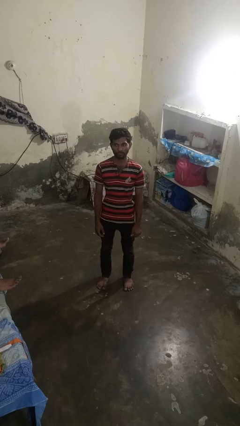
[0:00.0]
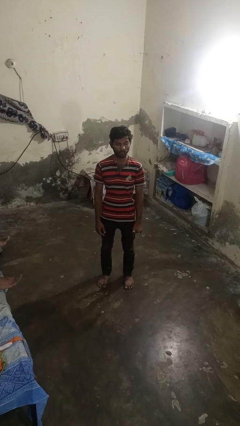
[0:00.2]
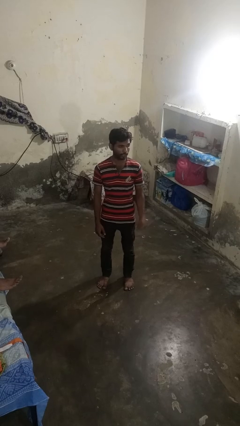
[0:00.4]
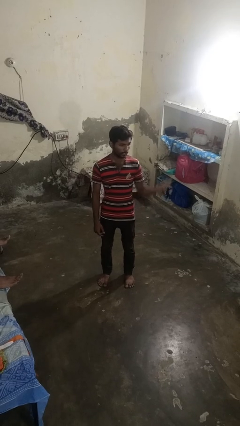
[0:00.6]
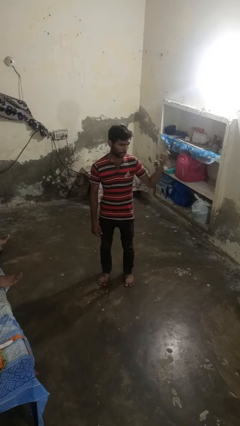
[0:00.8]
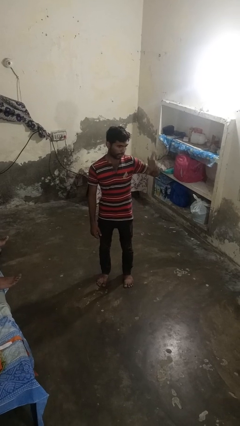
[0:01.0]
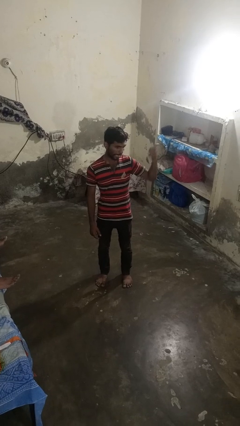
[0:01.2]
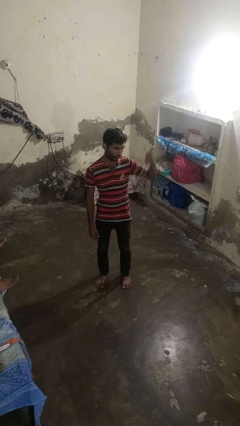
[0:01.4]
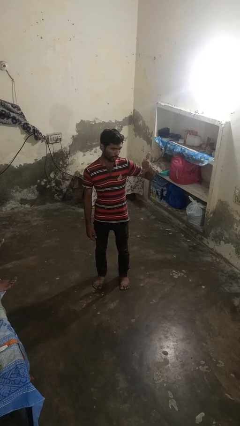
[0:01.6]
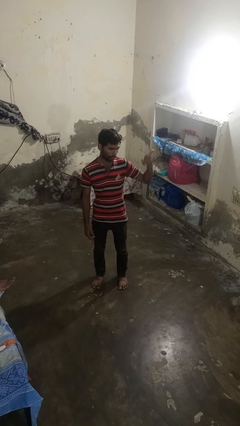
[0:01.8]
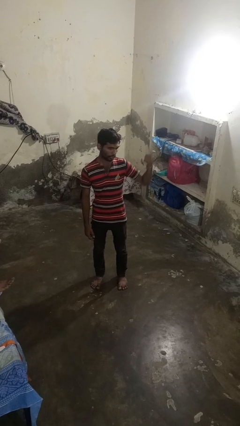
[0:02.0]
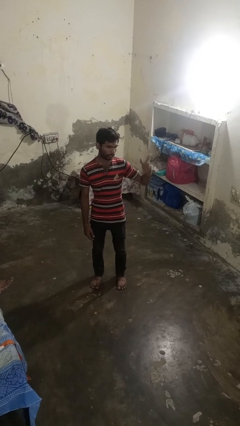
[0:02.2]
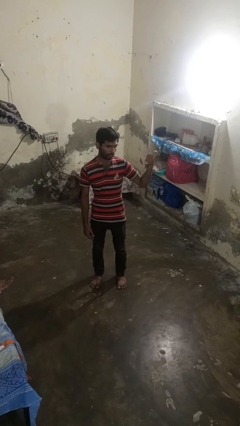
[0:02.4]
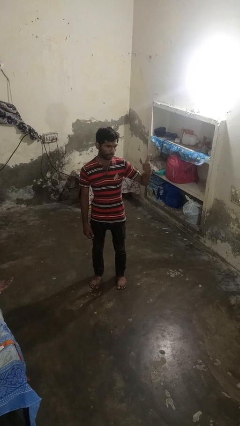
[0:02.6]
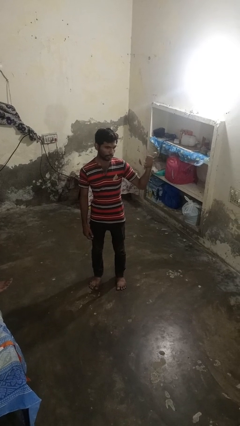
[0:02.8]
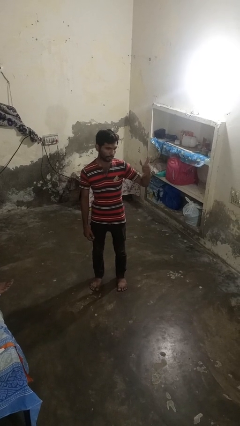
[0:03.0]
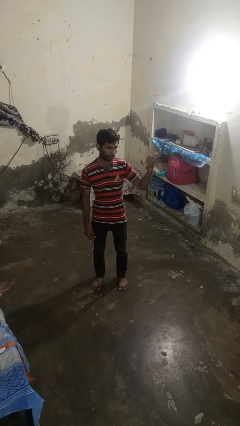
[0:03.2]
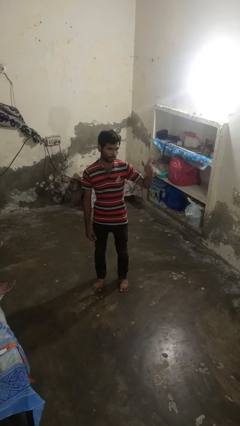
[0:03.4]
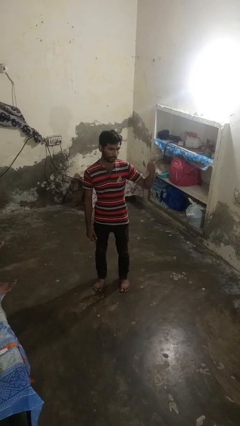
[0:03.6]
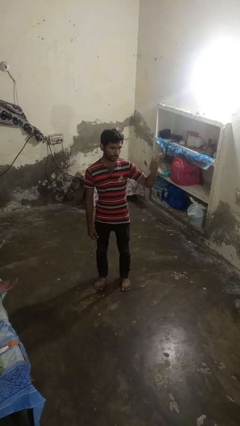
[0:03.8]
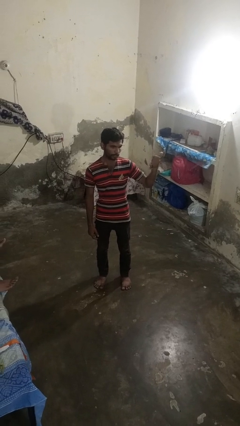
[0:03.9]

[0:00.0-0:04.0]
person gestures hang loose

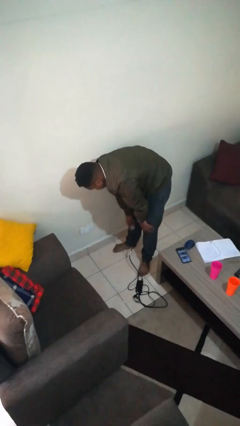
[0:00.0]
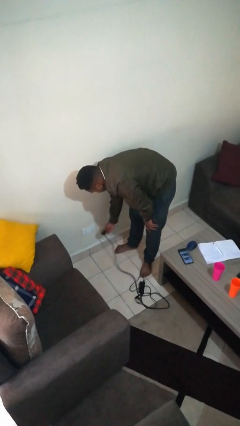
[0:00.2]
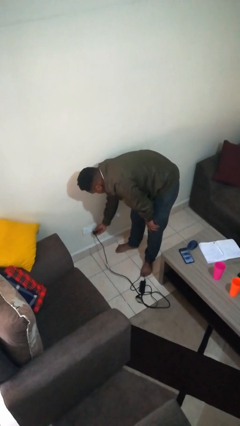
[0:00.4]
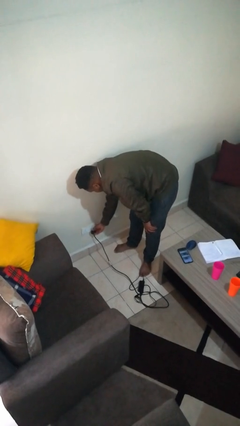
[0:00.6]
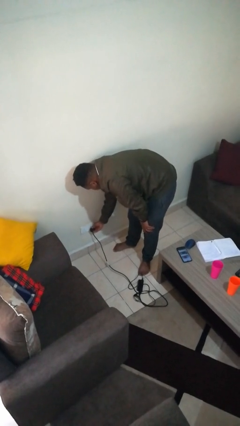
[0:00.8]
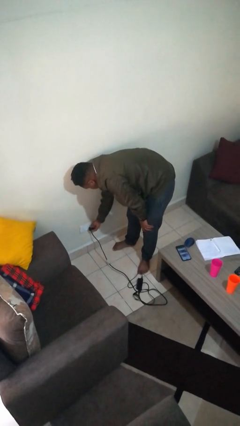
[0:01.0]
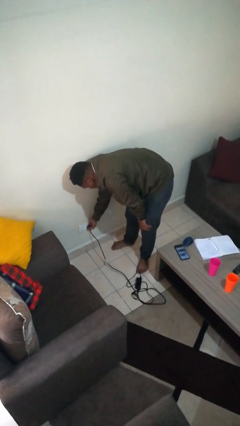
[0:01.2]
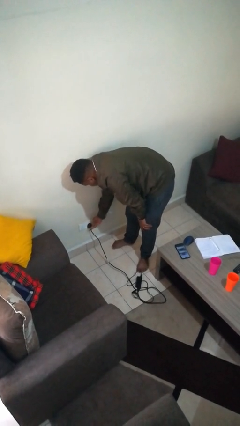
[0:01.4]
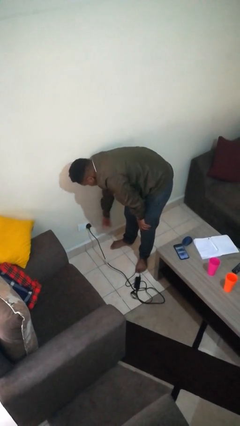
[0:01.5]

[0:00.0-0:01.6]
person plugs into electrical socket

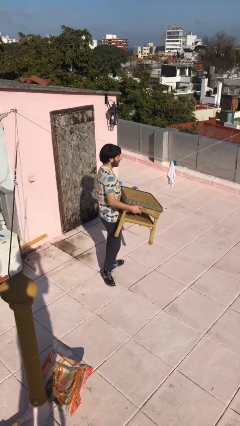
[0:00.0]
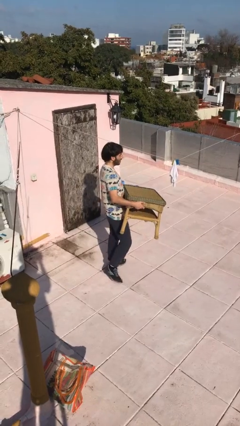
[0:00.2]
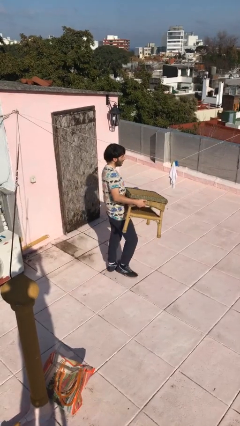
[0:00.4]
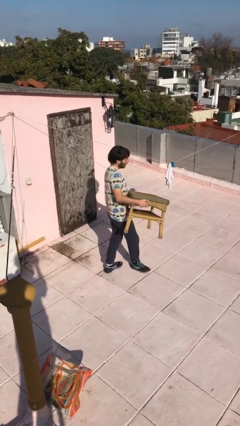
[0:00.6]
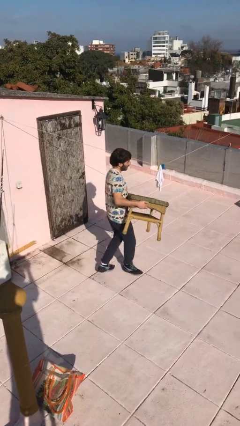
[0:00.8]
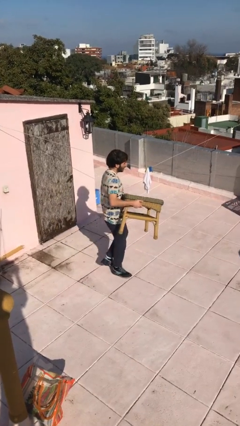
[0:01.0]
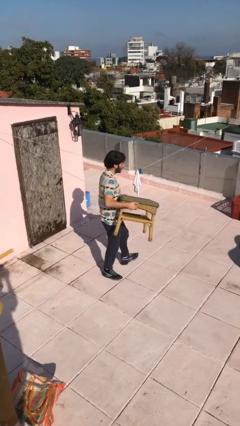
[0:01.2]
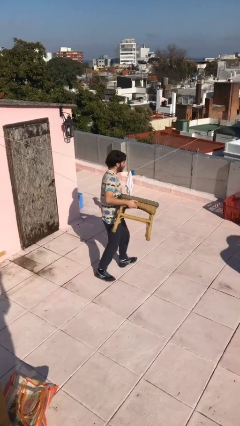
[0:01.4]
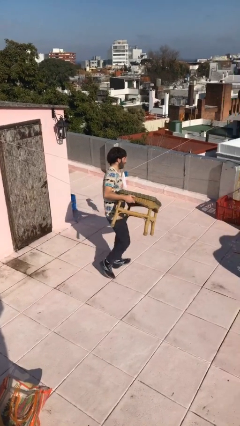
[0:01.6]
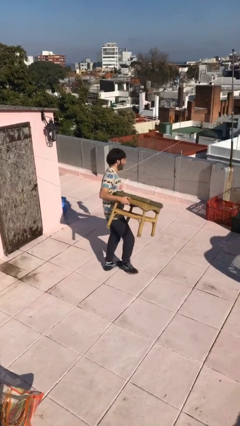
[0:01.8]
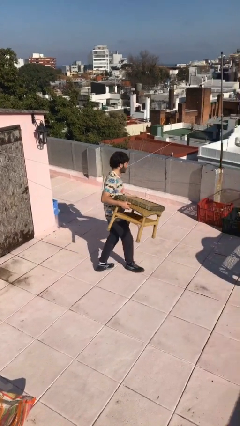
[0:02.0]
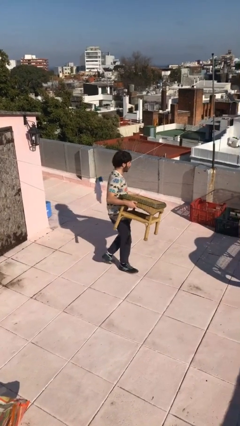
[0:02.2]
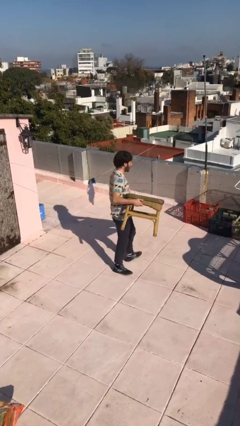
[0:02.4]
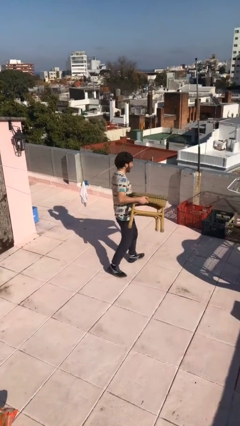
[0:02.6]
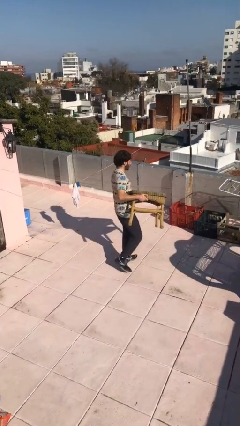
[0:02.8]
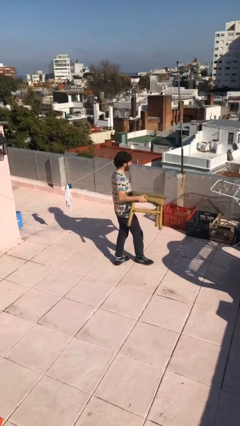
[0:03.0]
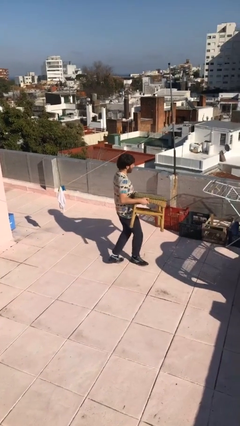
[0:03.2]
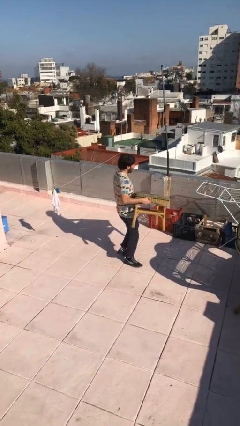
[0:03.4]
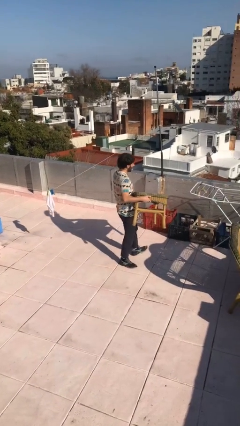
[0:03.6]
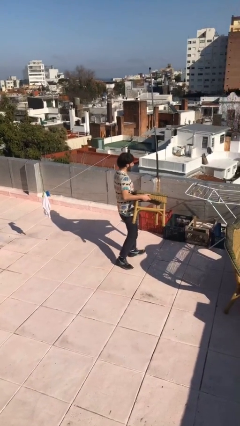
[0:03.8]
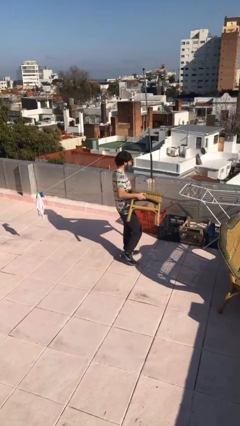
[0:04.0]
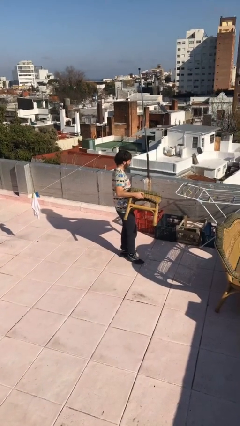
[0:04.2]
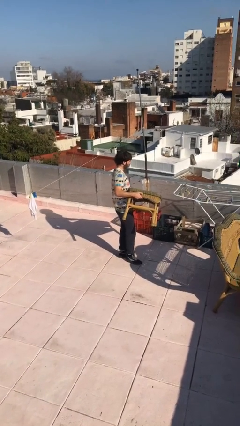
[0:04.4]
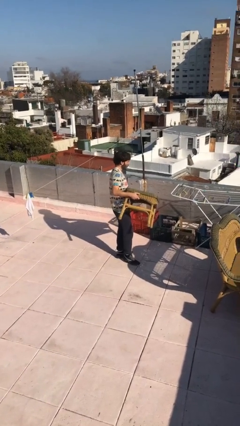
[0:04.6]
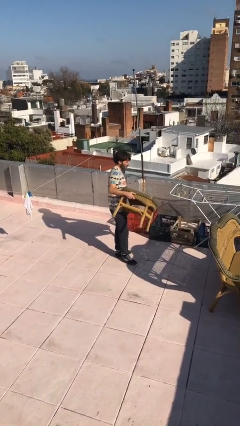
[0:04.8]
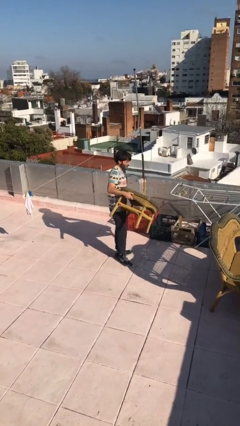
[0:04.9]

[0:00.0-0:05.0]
person carries furniture

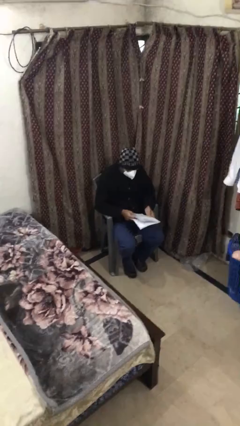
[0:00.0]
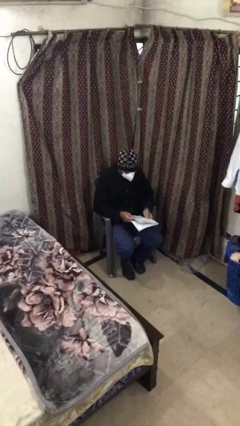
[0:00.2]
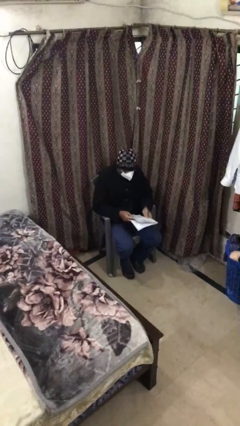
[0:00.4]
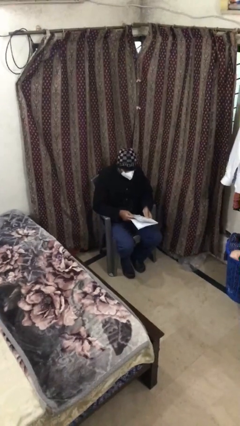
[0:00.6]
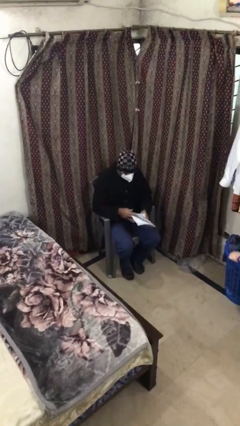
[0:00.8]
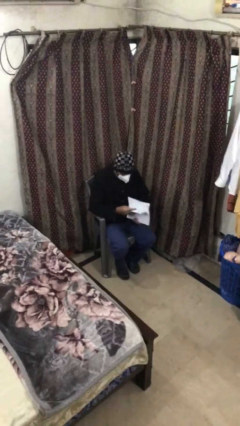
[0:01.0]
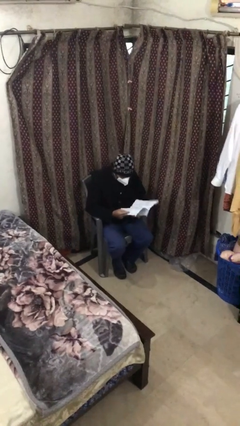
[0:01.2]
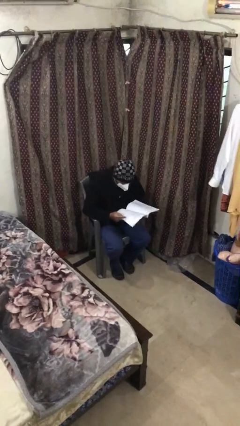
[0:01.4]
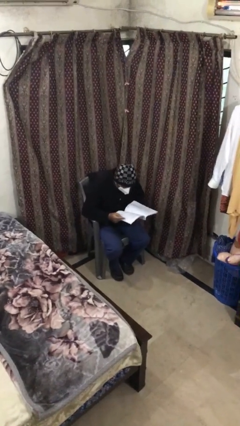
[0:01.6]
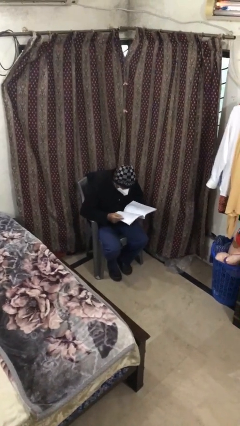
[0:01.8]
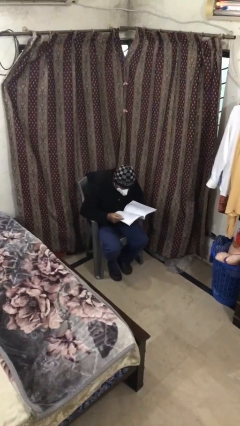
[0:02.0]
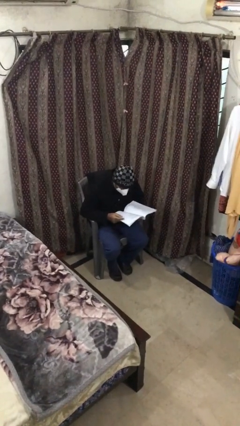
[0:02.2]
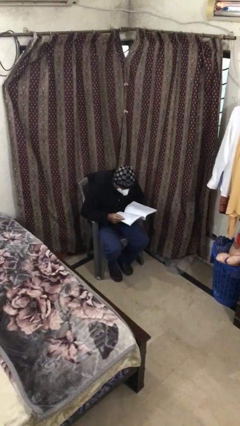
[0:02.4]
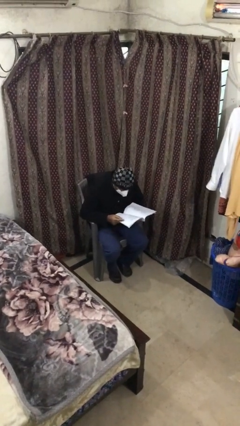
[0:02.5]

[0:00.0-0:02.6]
person reads document

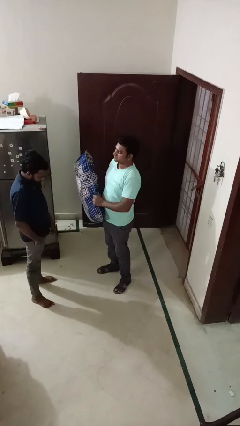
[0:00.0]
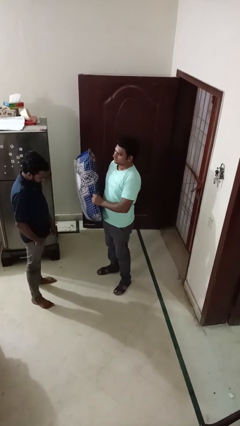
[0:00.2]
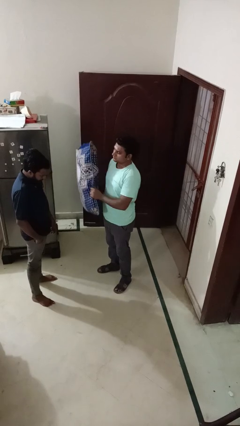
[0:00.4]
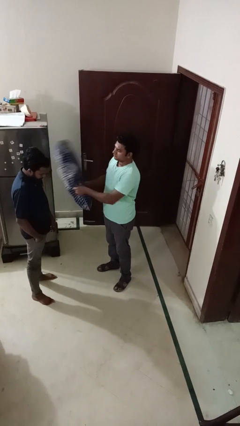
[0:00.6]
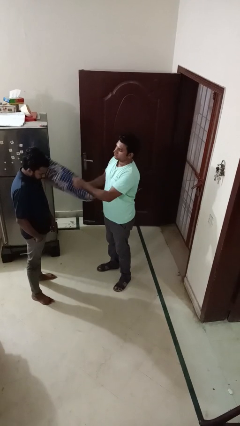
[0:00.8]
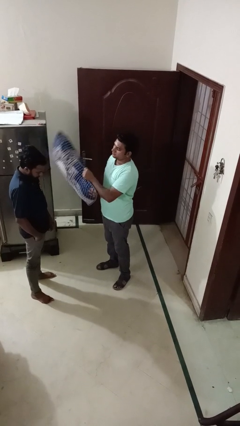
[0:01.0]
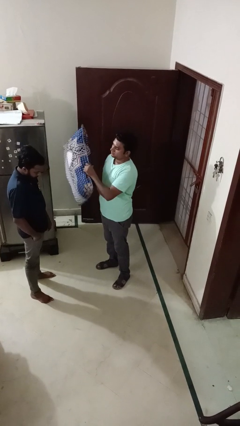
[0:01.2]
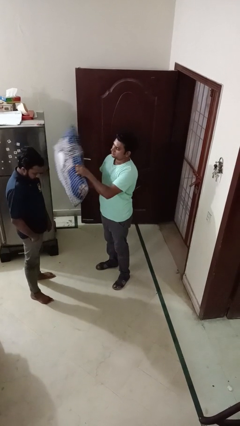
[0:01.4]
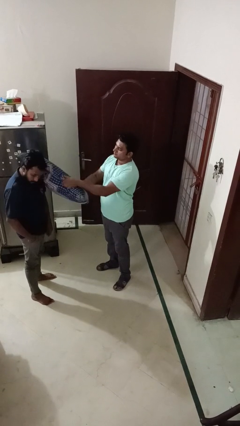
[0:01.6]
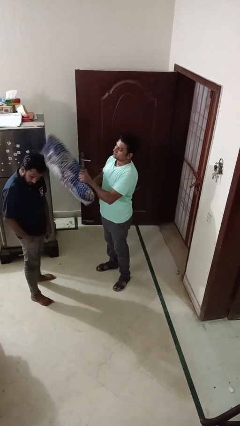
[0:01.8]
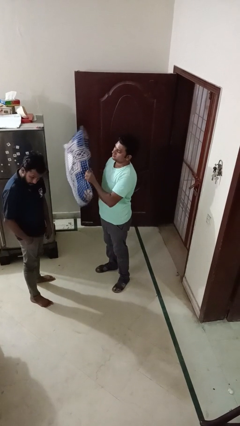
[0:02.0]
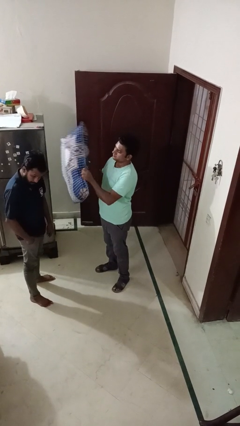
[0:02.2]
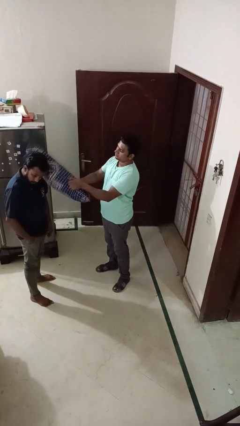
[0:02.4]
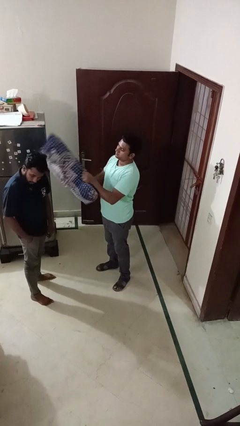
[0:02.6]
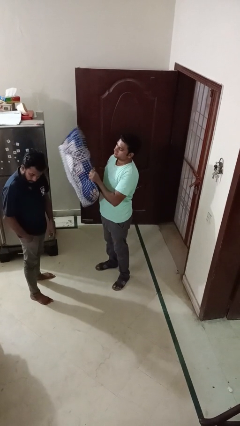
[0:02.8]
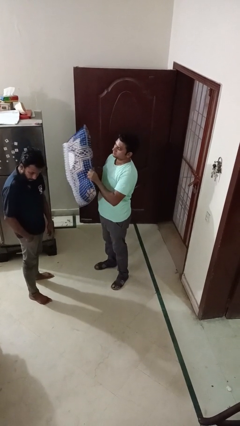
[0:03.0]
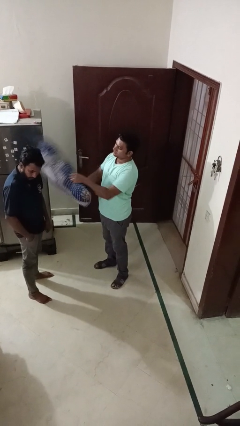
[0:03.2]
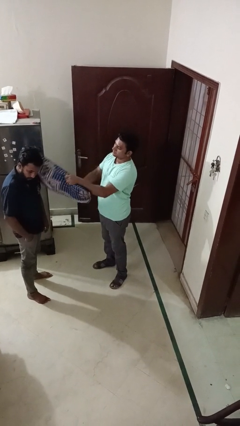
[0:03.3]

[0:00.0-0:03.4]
person hits person with pillow

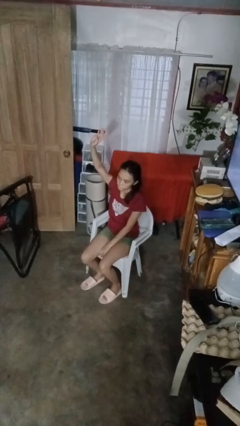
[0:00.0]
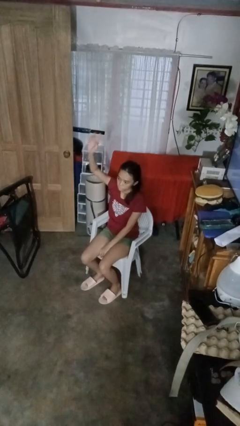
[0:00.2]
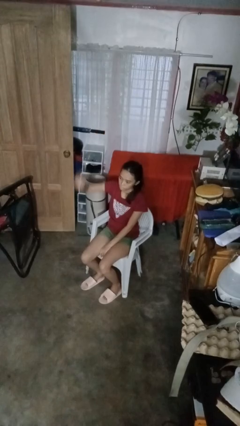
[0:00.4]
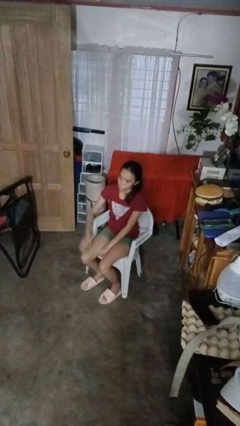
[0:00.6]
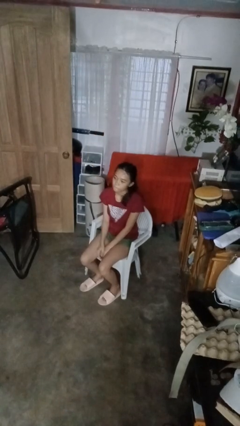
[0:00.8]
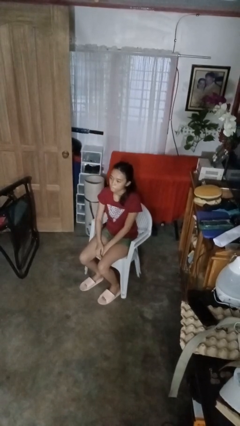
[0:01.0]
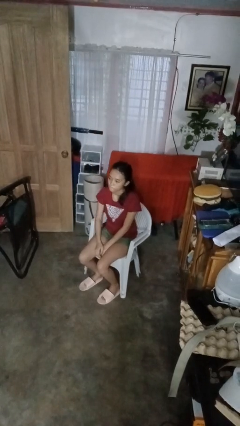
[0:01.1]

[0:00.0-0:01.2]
person gestures lower hand
